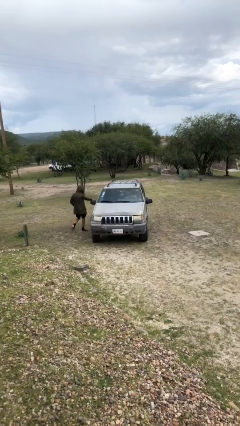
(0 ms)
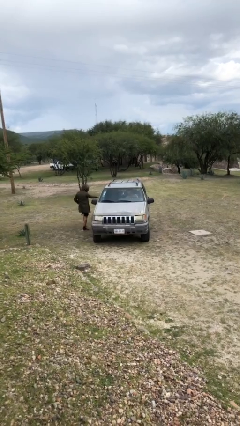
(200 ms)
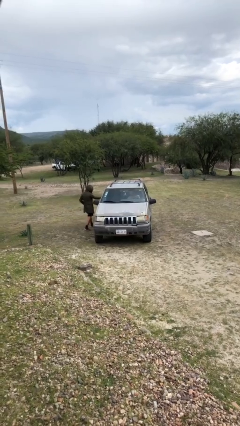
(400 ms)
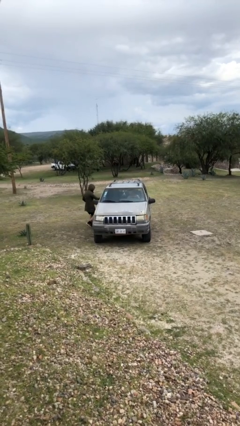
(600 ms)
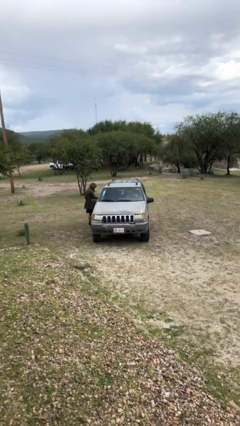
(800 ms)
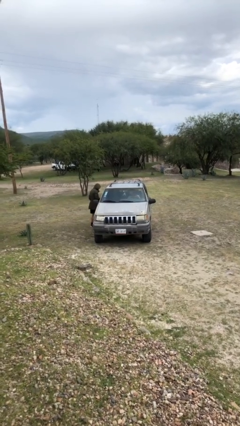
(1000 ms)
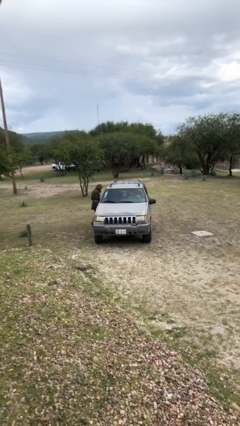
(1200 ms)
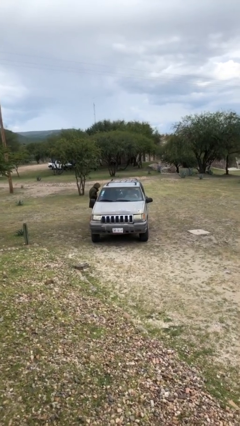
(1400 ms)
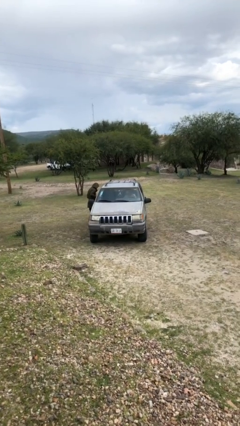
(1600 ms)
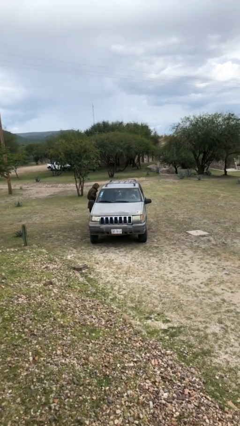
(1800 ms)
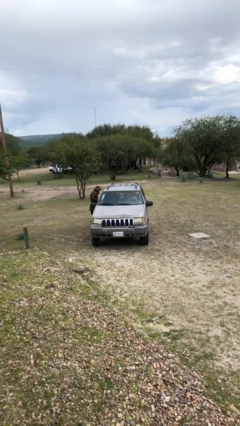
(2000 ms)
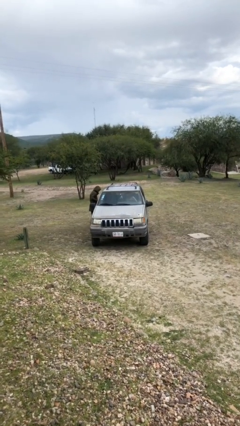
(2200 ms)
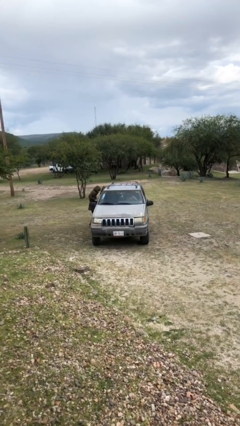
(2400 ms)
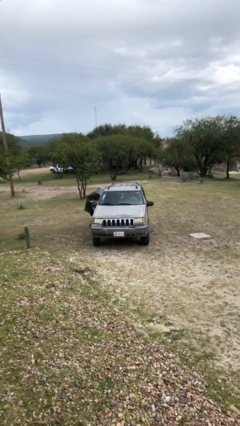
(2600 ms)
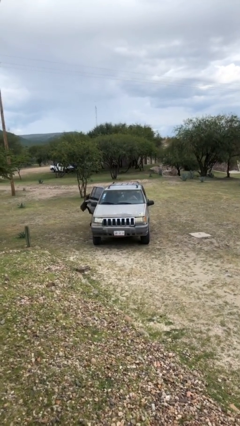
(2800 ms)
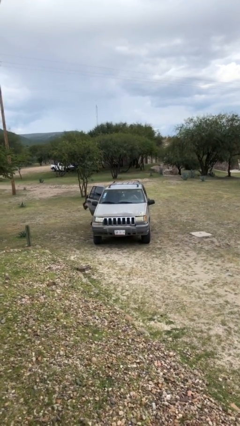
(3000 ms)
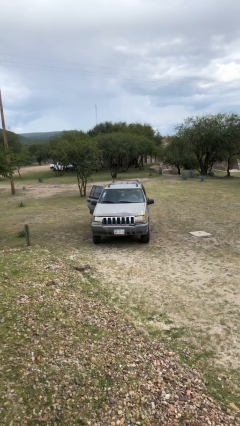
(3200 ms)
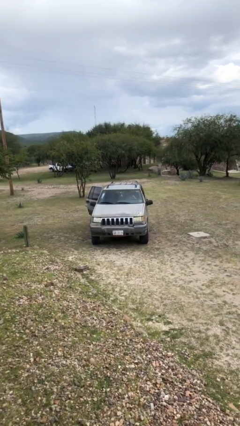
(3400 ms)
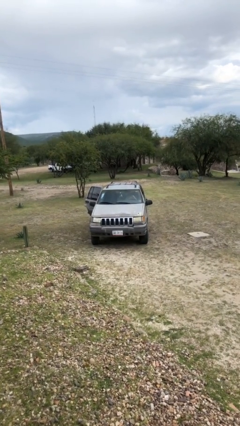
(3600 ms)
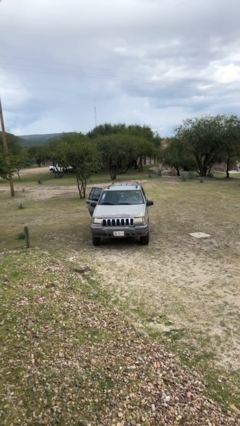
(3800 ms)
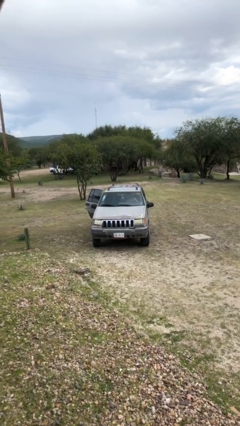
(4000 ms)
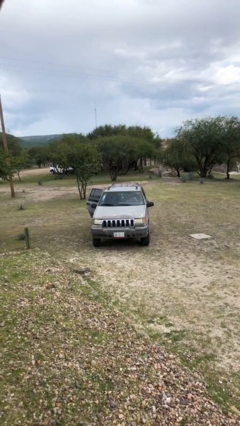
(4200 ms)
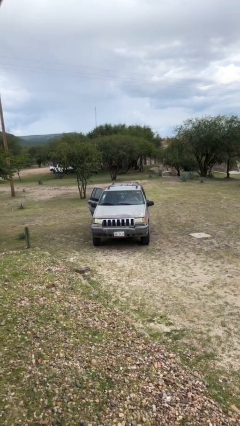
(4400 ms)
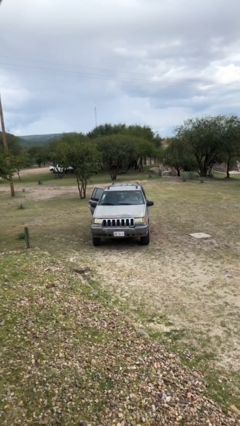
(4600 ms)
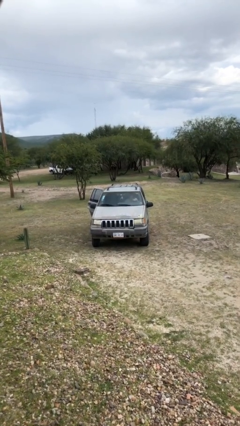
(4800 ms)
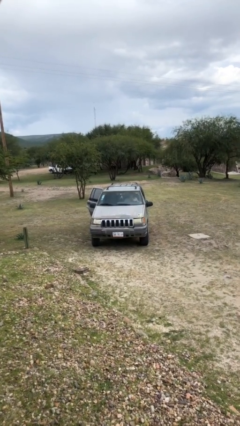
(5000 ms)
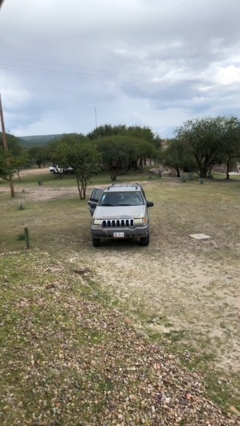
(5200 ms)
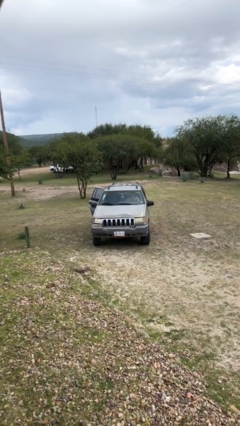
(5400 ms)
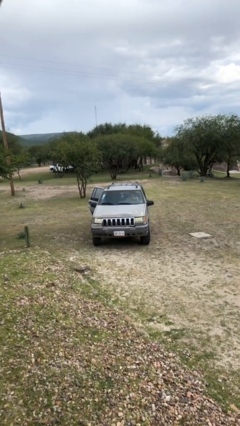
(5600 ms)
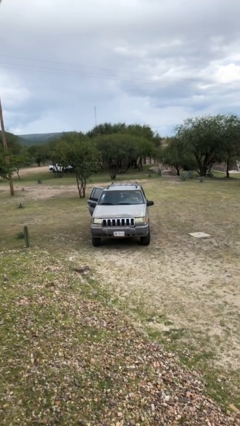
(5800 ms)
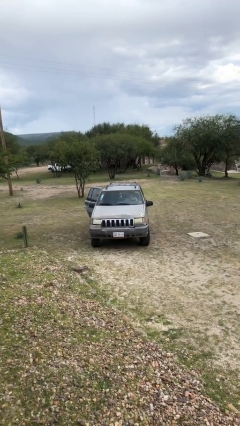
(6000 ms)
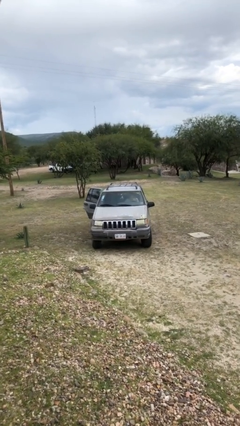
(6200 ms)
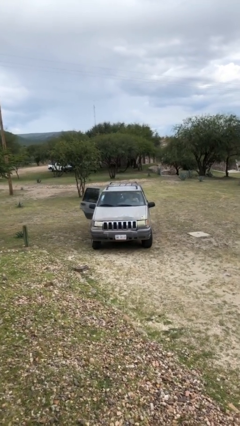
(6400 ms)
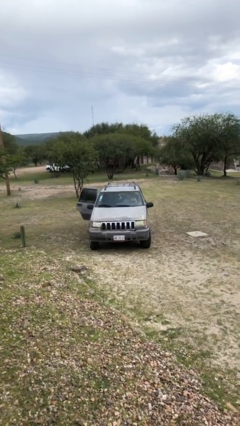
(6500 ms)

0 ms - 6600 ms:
car picks up person

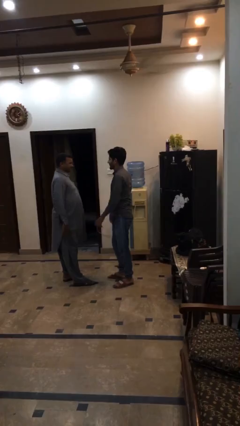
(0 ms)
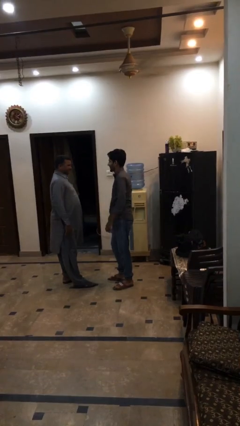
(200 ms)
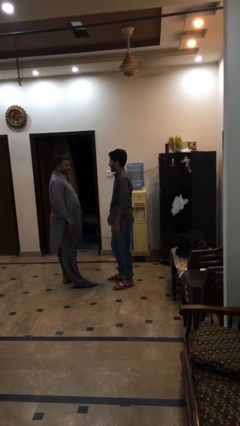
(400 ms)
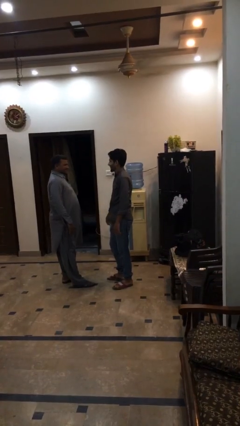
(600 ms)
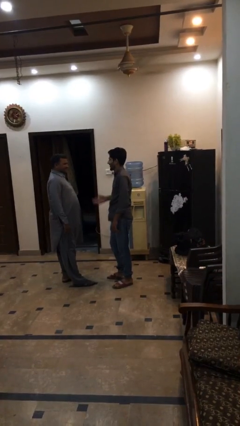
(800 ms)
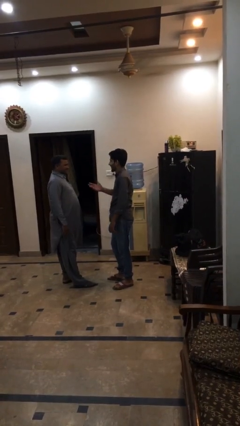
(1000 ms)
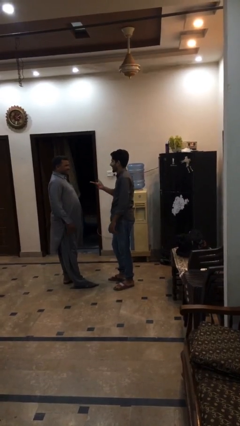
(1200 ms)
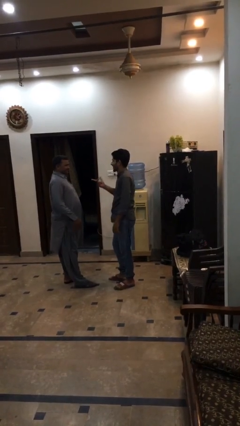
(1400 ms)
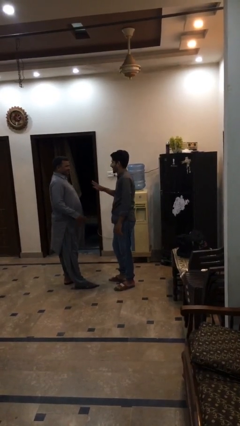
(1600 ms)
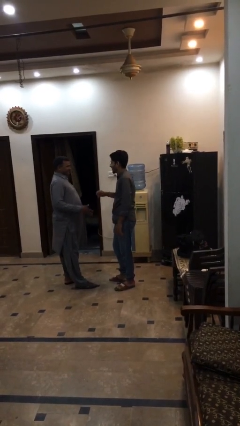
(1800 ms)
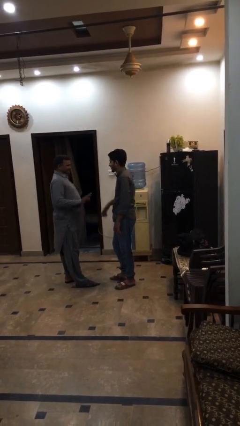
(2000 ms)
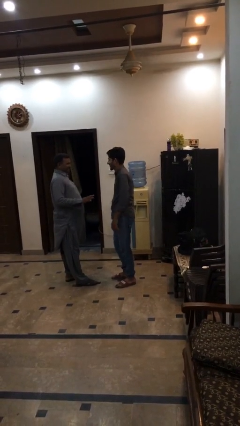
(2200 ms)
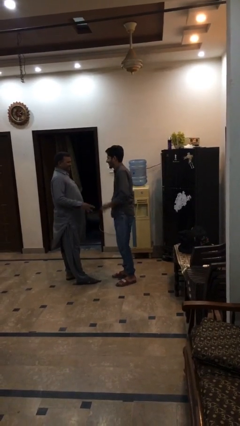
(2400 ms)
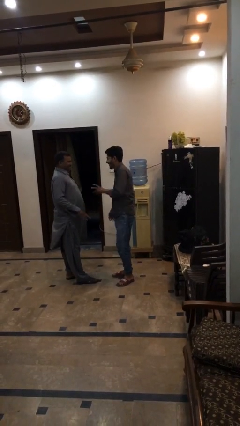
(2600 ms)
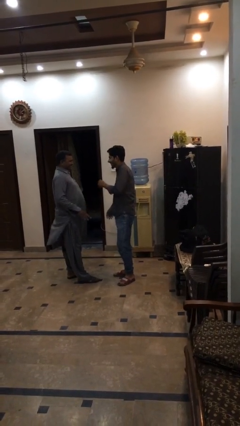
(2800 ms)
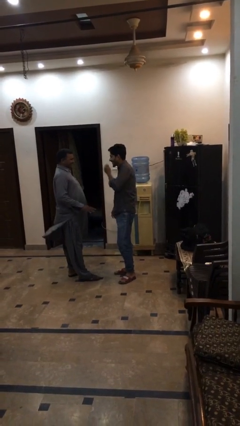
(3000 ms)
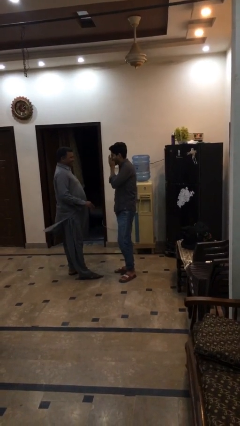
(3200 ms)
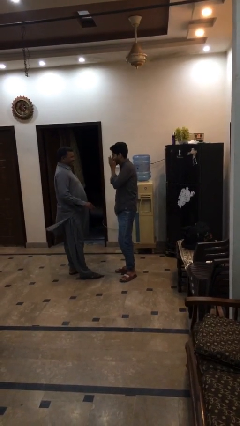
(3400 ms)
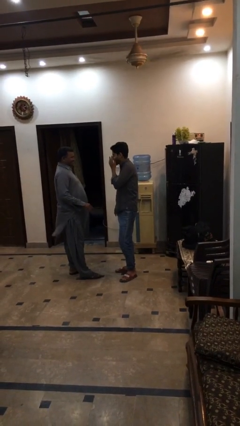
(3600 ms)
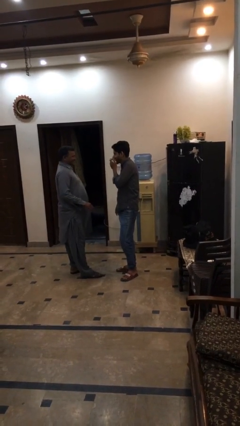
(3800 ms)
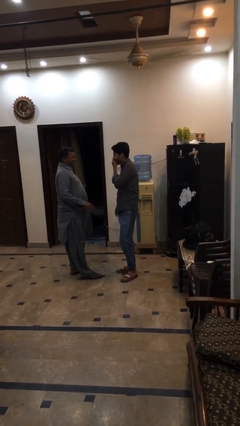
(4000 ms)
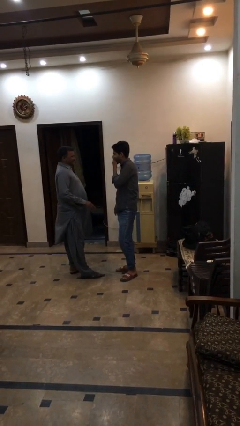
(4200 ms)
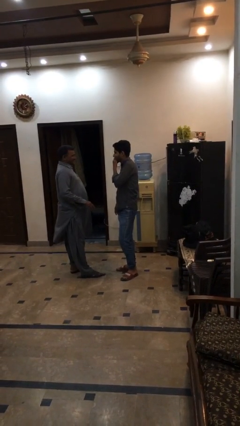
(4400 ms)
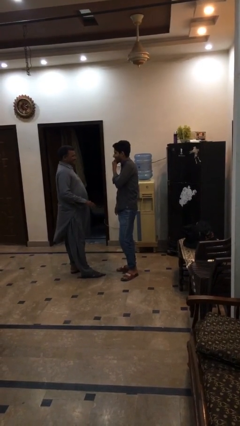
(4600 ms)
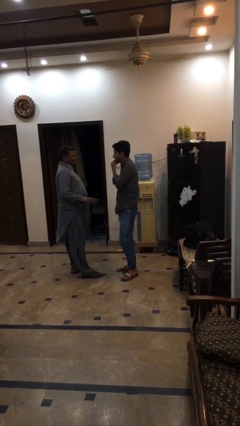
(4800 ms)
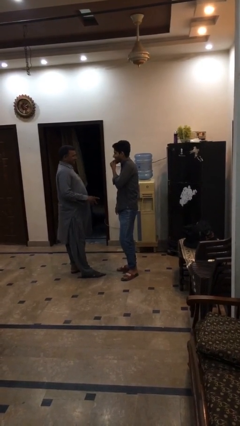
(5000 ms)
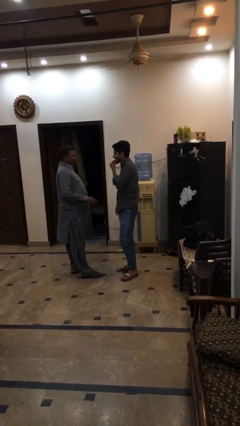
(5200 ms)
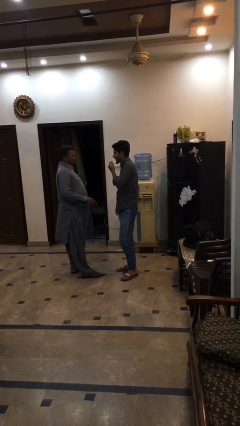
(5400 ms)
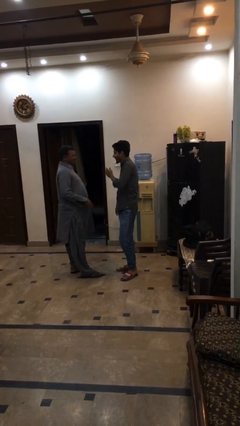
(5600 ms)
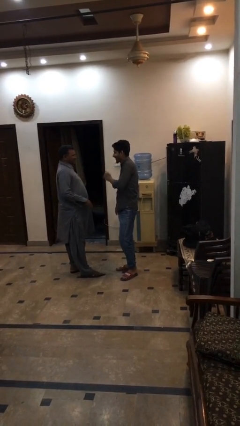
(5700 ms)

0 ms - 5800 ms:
person talks to person

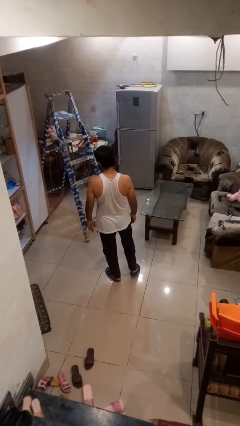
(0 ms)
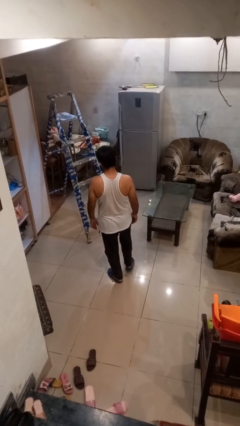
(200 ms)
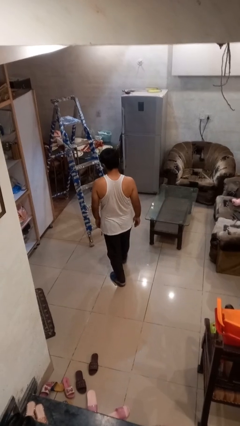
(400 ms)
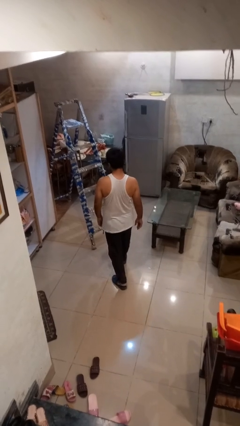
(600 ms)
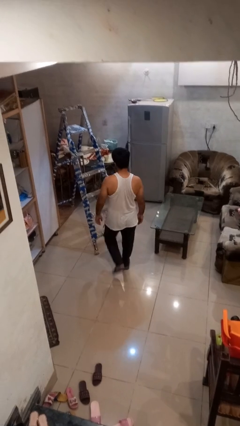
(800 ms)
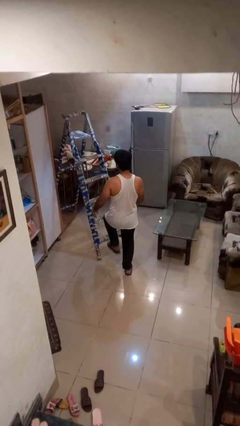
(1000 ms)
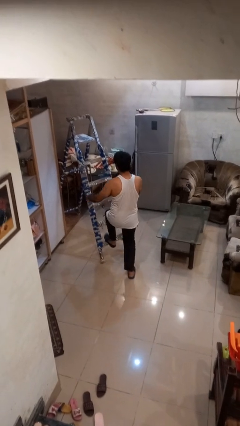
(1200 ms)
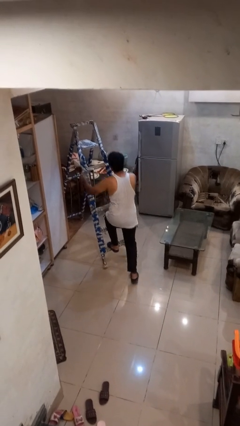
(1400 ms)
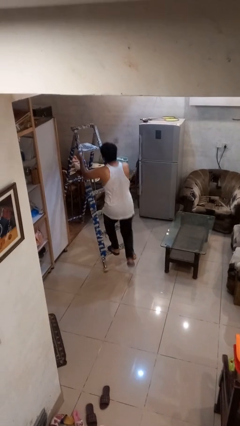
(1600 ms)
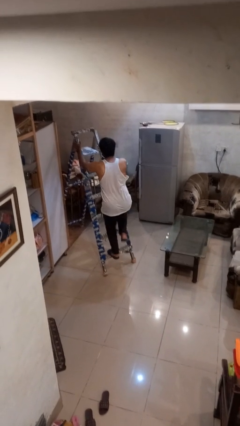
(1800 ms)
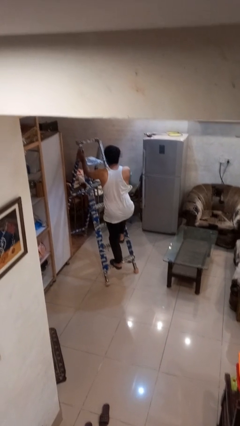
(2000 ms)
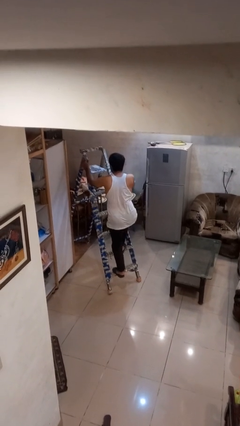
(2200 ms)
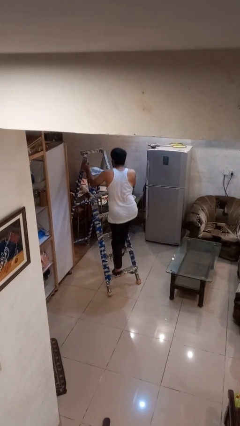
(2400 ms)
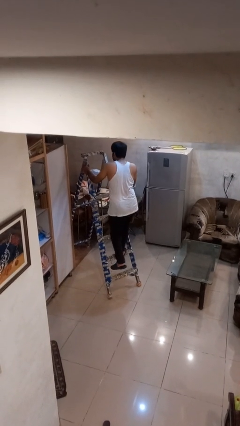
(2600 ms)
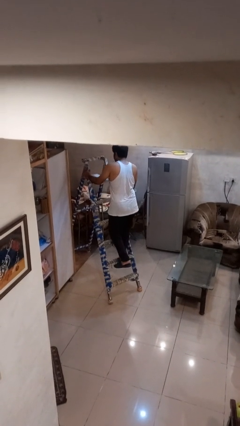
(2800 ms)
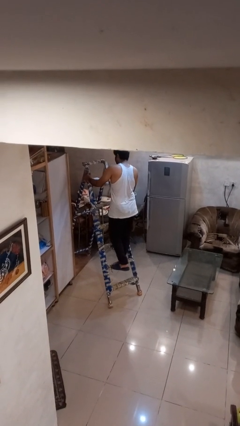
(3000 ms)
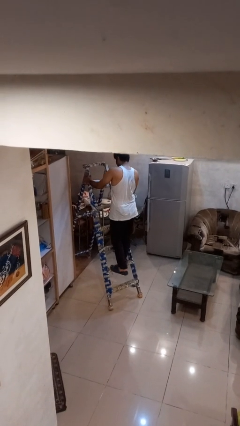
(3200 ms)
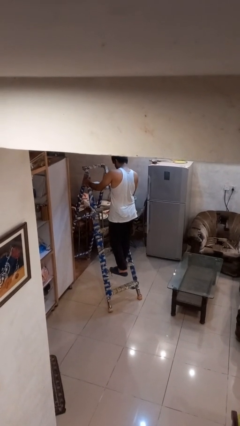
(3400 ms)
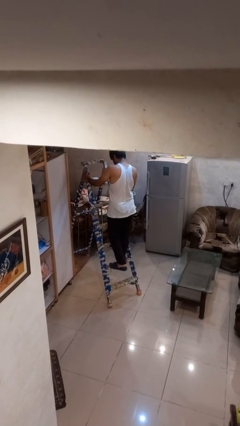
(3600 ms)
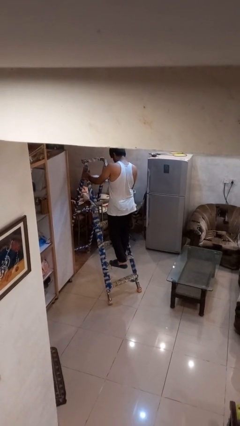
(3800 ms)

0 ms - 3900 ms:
person climbs up ladder

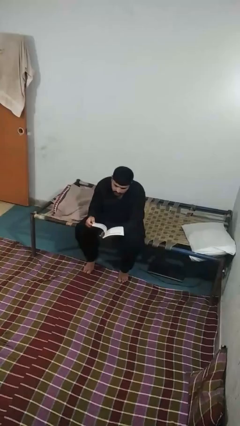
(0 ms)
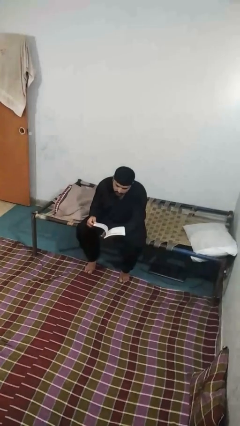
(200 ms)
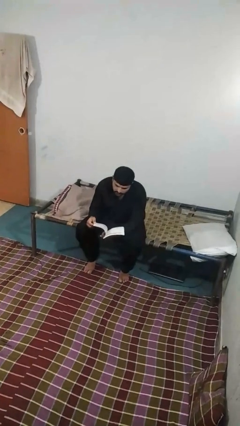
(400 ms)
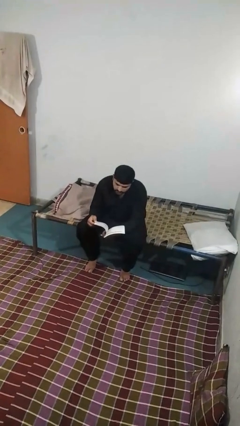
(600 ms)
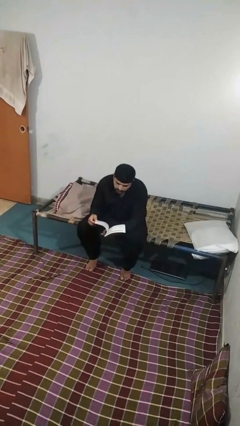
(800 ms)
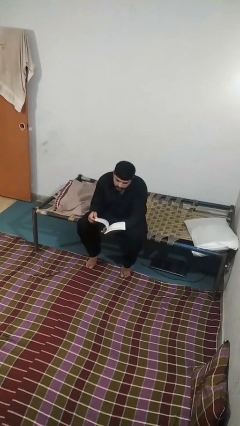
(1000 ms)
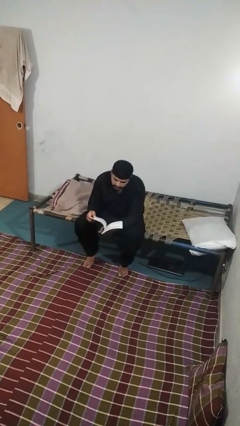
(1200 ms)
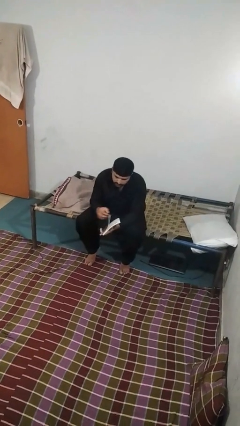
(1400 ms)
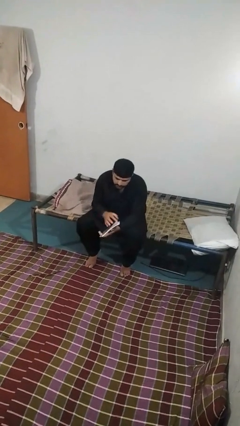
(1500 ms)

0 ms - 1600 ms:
person reads book

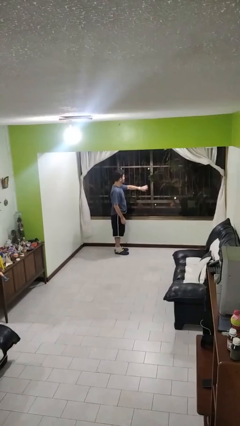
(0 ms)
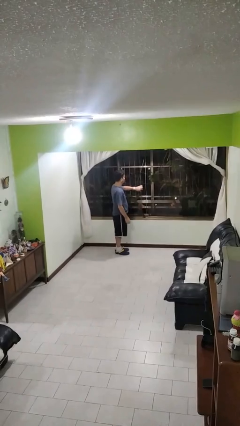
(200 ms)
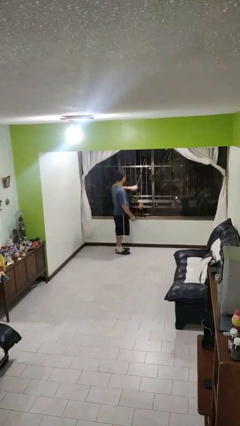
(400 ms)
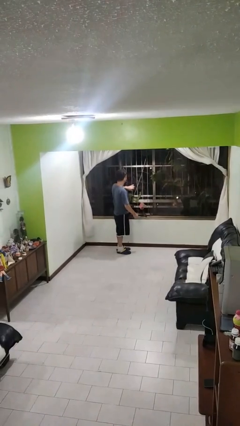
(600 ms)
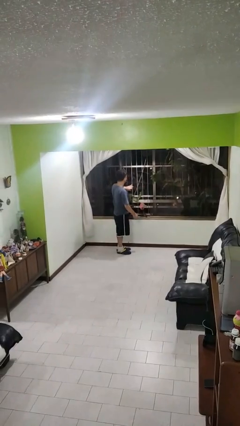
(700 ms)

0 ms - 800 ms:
person opens home window
